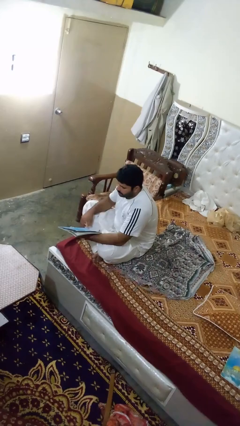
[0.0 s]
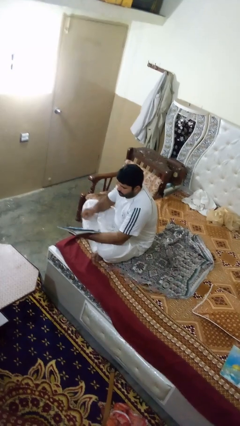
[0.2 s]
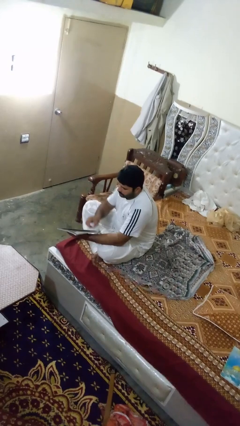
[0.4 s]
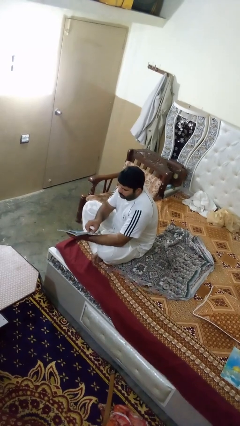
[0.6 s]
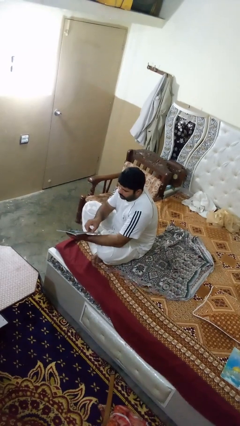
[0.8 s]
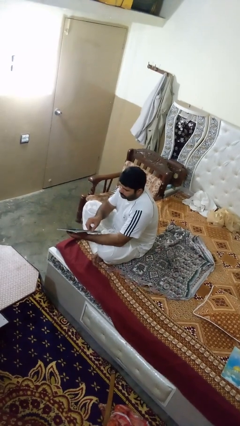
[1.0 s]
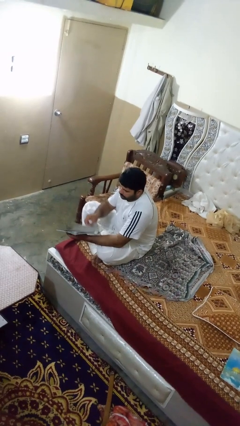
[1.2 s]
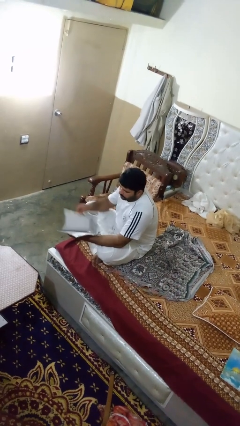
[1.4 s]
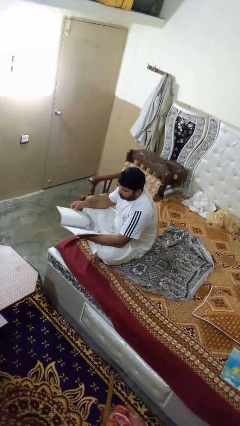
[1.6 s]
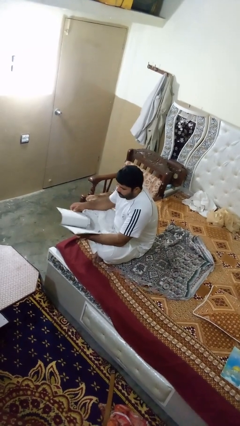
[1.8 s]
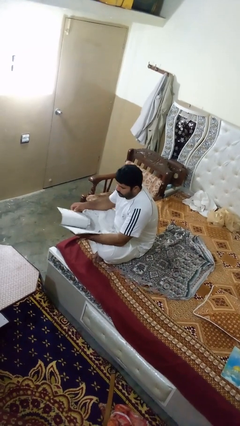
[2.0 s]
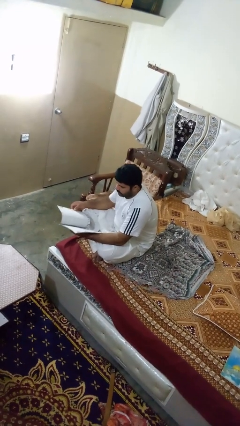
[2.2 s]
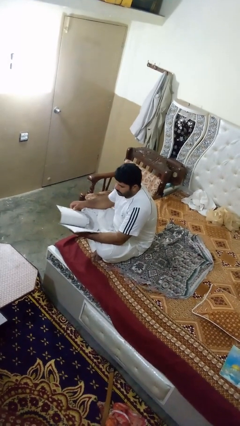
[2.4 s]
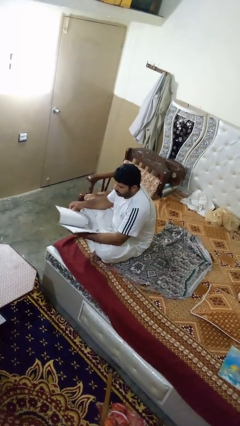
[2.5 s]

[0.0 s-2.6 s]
person reads magazine

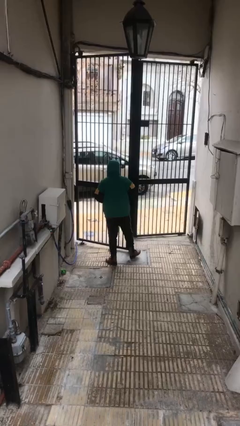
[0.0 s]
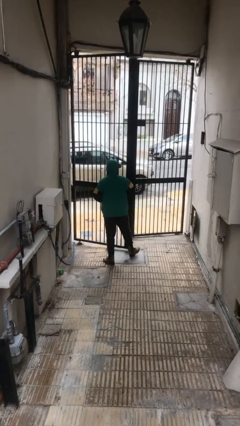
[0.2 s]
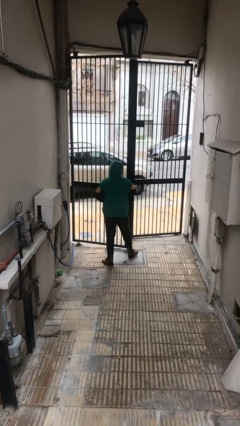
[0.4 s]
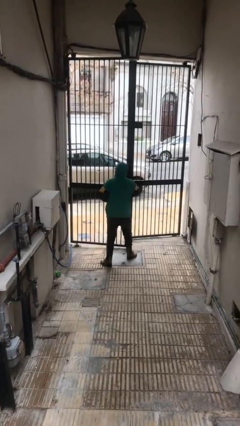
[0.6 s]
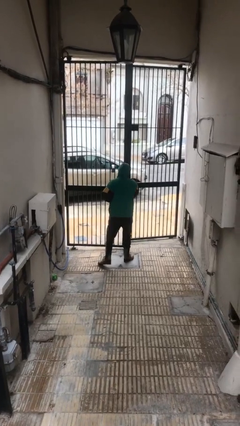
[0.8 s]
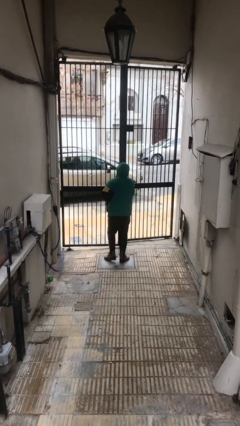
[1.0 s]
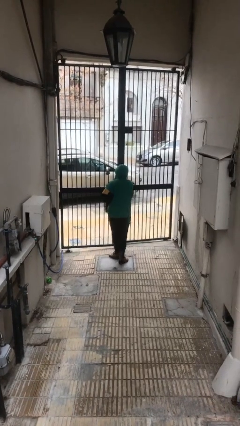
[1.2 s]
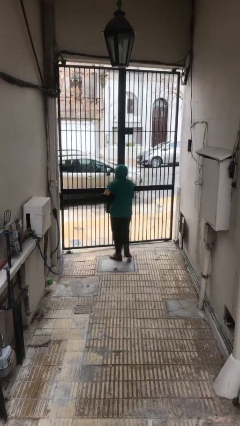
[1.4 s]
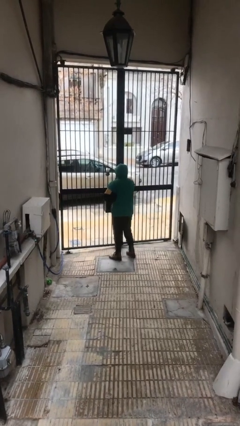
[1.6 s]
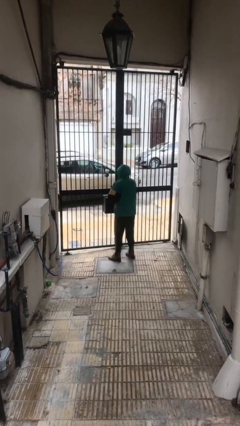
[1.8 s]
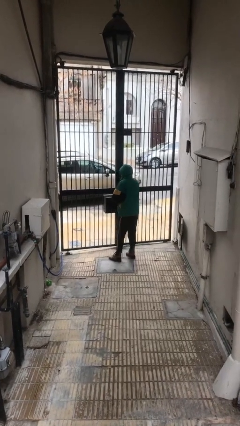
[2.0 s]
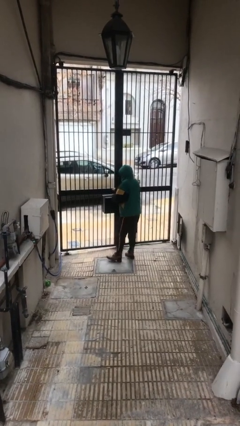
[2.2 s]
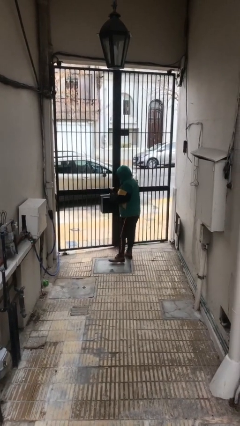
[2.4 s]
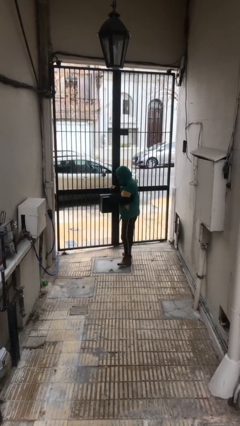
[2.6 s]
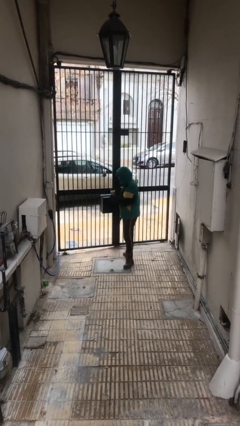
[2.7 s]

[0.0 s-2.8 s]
person closes gate

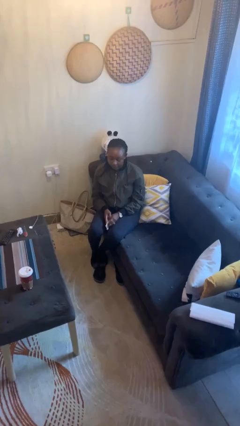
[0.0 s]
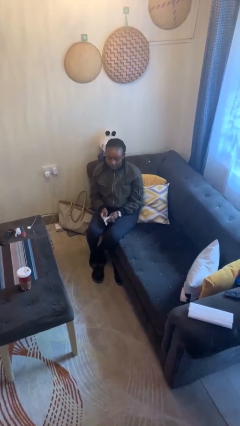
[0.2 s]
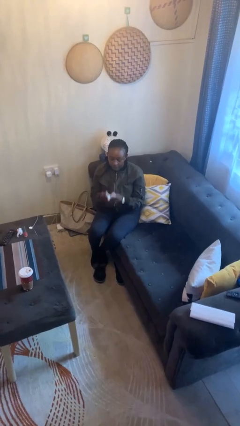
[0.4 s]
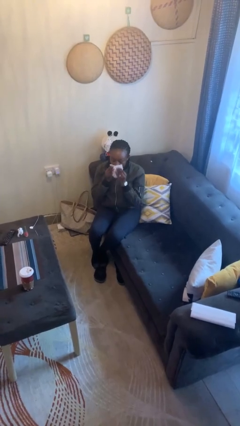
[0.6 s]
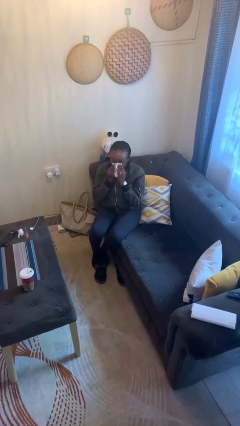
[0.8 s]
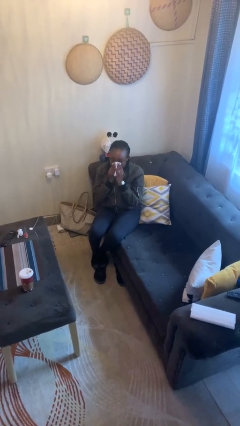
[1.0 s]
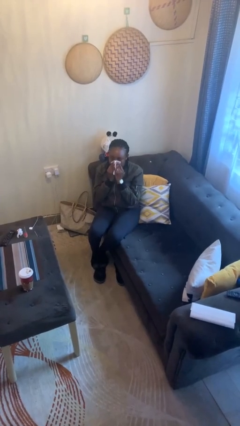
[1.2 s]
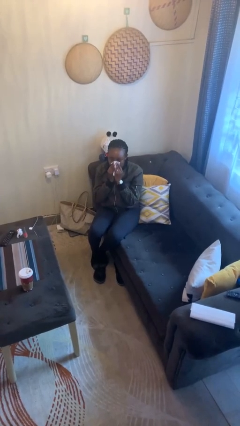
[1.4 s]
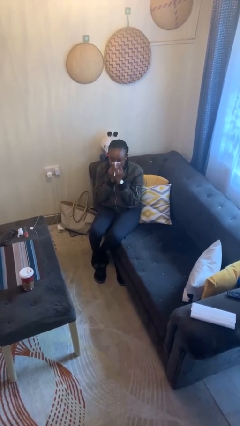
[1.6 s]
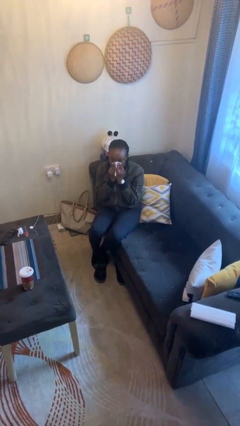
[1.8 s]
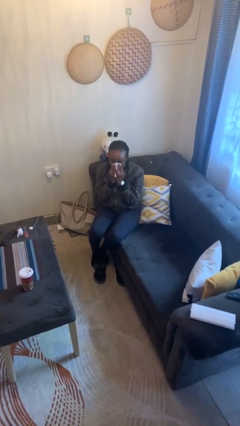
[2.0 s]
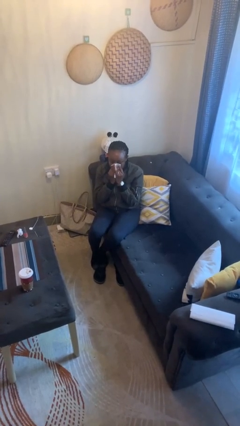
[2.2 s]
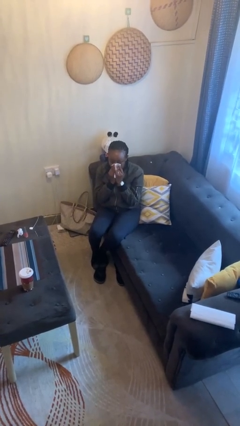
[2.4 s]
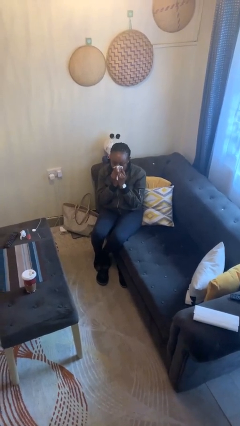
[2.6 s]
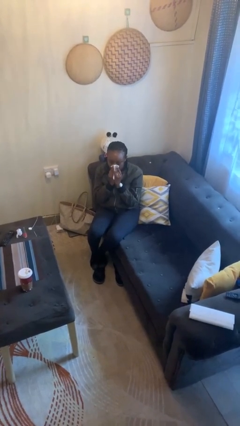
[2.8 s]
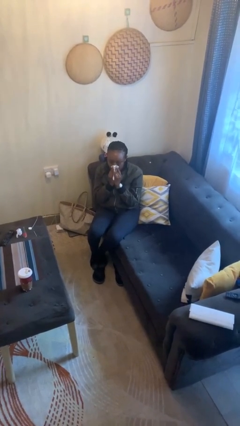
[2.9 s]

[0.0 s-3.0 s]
person blows nose

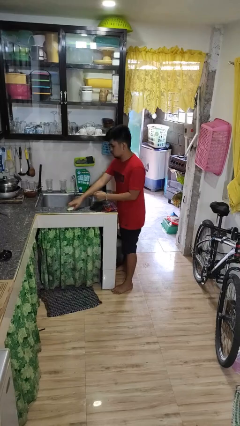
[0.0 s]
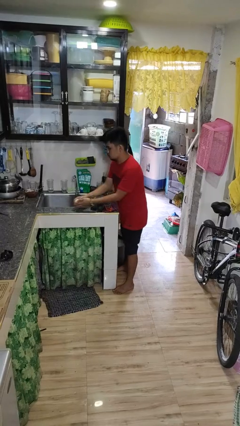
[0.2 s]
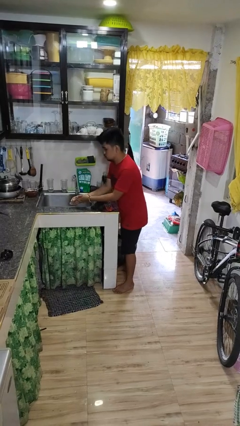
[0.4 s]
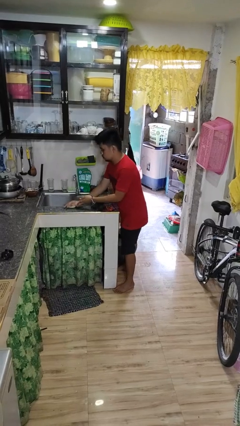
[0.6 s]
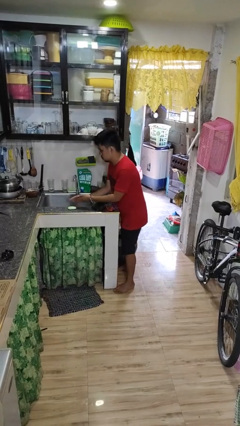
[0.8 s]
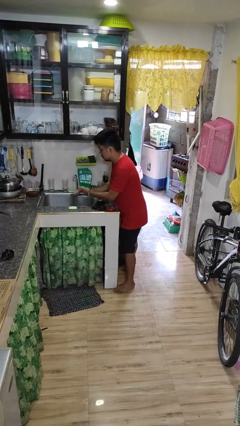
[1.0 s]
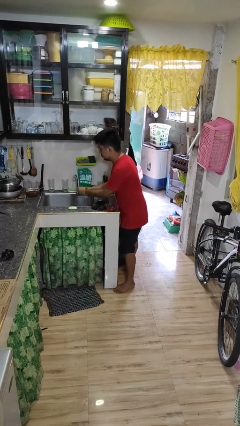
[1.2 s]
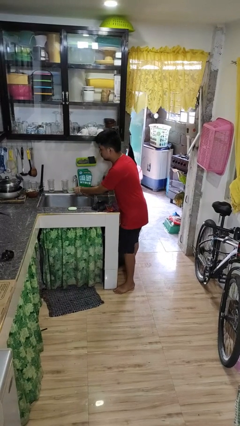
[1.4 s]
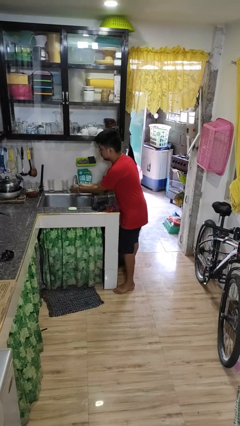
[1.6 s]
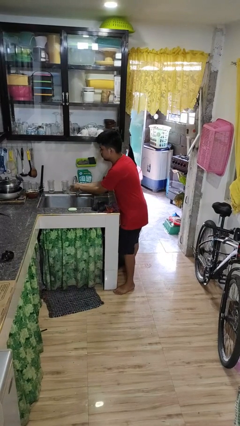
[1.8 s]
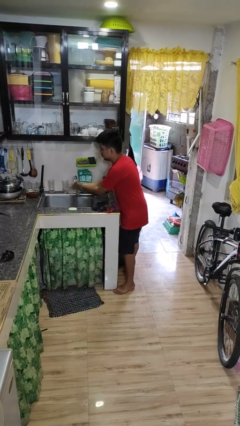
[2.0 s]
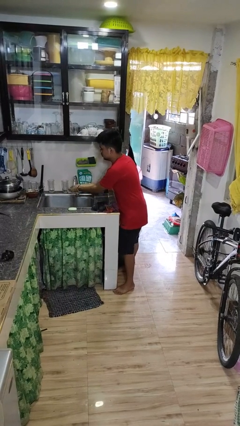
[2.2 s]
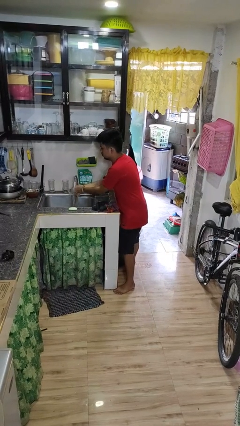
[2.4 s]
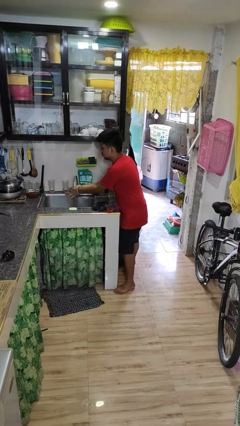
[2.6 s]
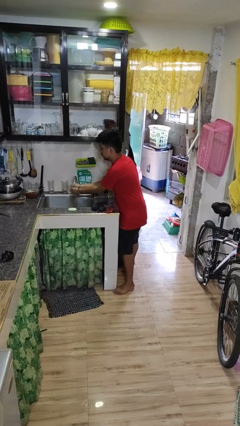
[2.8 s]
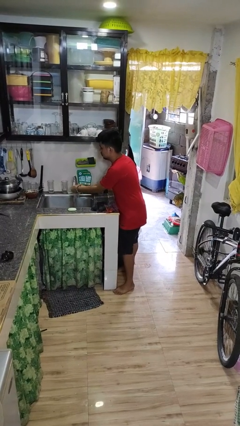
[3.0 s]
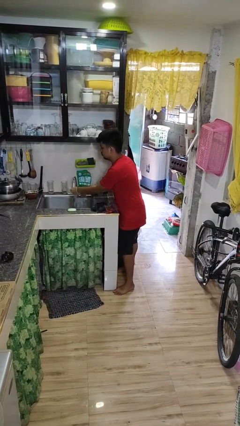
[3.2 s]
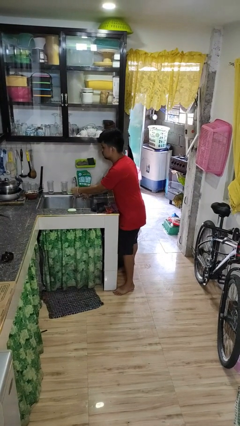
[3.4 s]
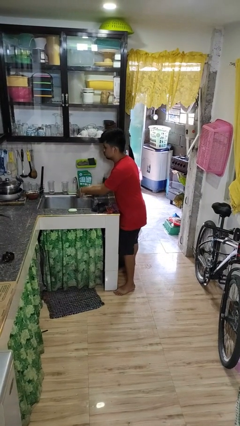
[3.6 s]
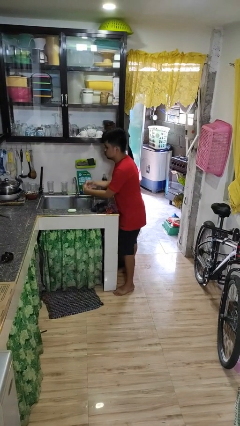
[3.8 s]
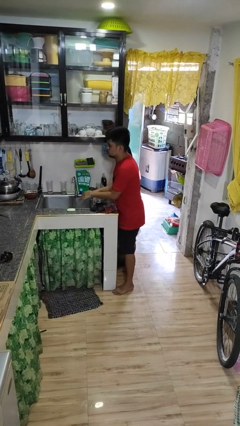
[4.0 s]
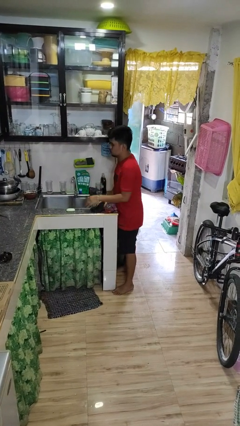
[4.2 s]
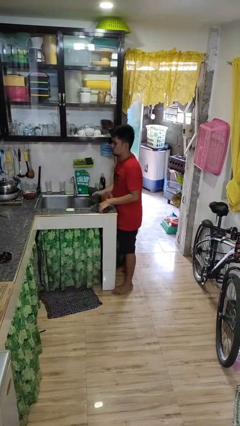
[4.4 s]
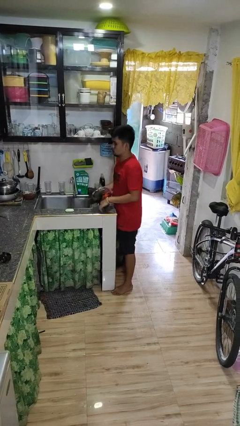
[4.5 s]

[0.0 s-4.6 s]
person washes hands

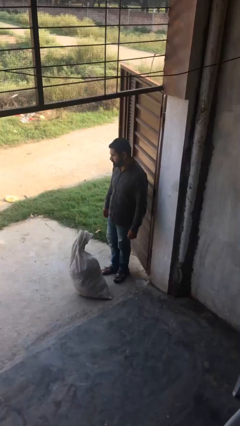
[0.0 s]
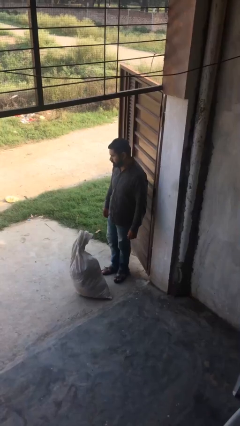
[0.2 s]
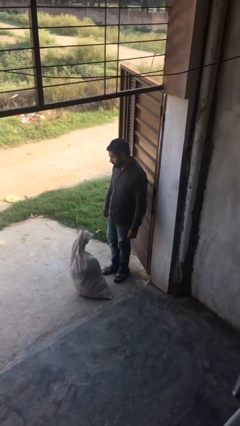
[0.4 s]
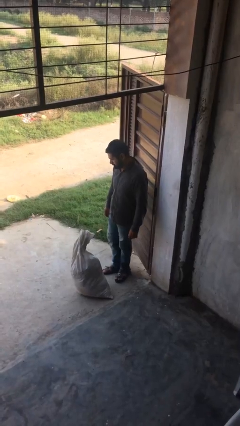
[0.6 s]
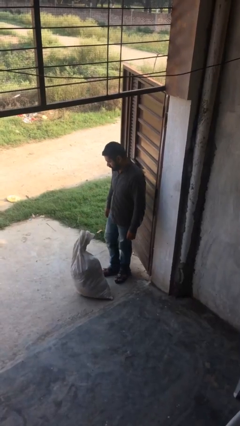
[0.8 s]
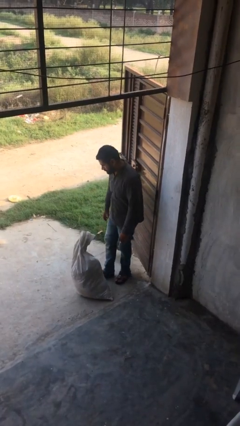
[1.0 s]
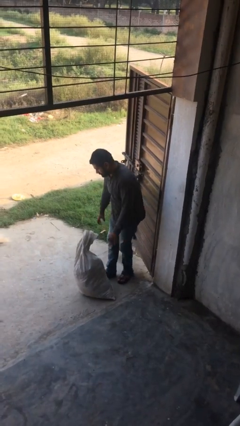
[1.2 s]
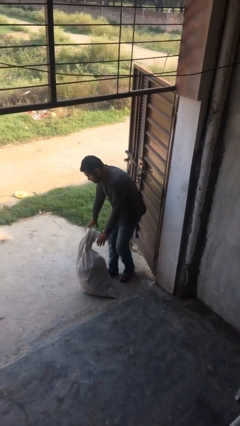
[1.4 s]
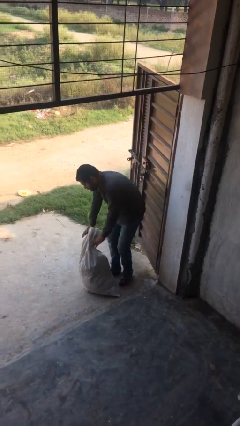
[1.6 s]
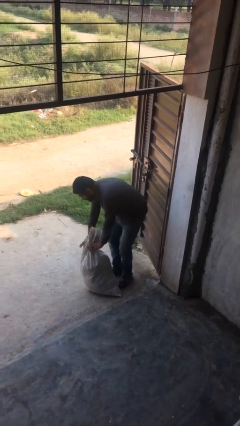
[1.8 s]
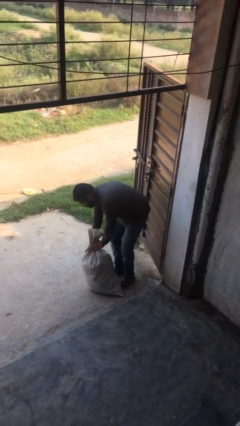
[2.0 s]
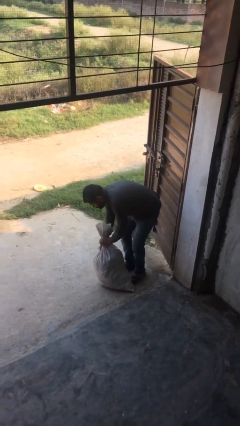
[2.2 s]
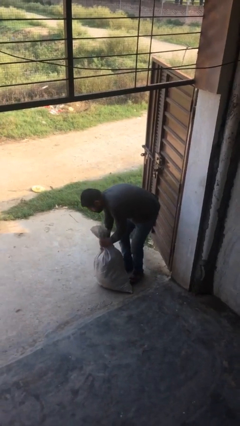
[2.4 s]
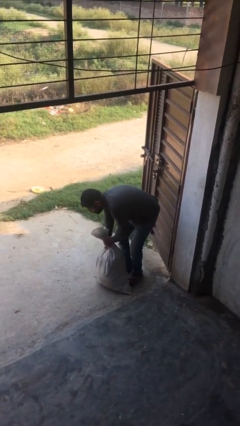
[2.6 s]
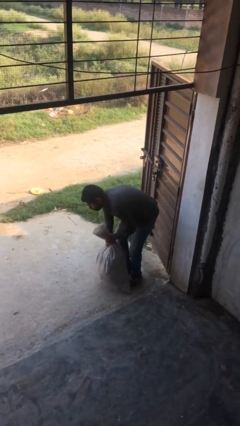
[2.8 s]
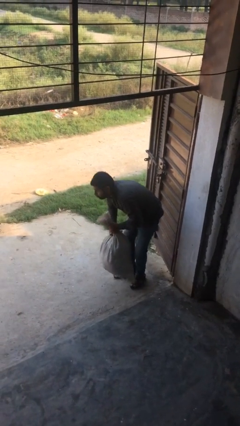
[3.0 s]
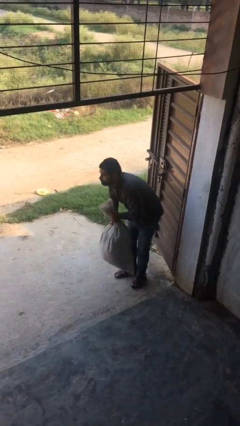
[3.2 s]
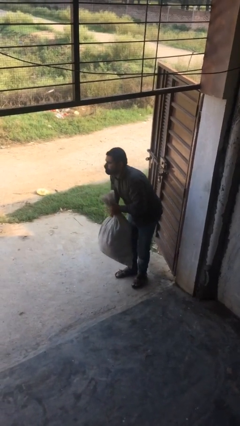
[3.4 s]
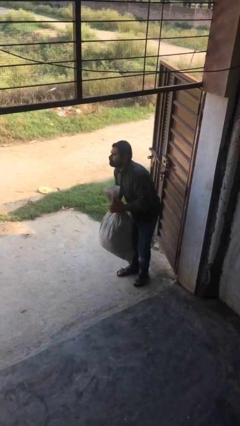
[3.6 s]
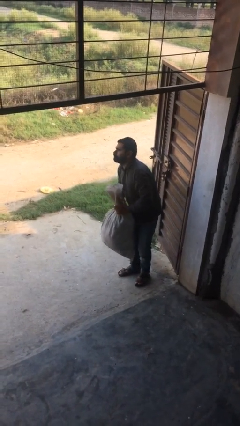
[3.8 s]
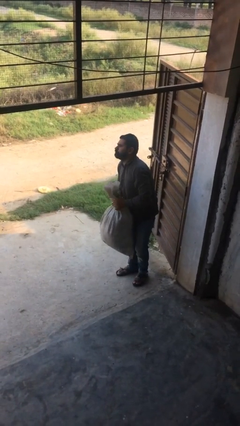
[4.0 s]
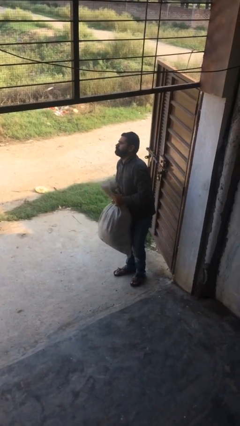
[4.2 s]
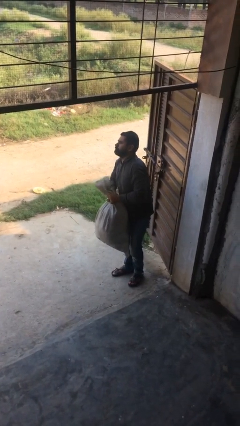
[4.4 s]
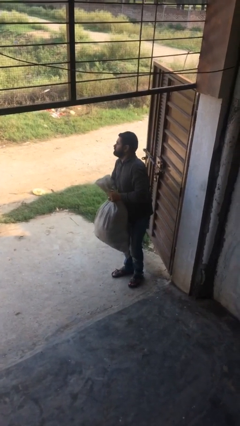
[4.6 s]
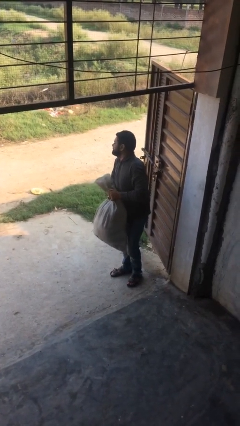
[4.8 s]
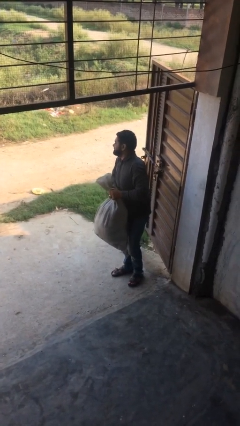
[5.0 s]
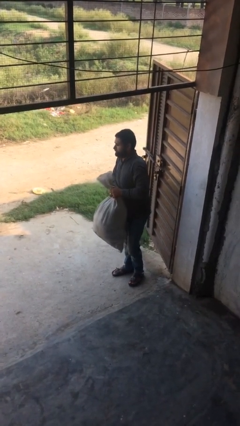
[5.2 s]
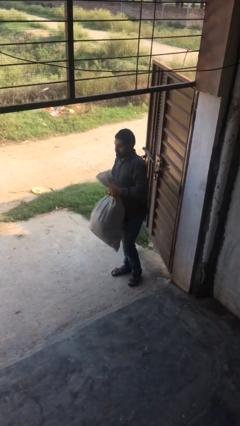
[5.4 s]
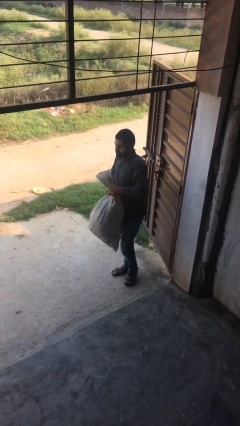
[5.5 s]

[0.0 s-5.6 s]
person picks up object from floor
